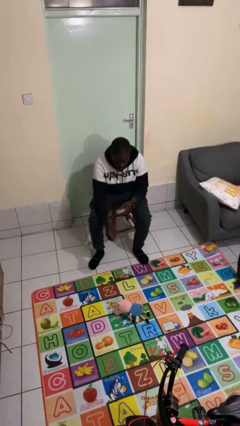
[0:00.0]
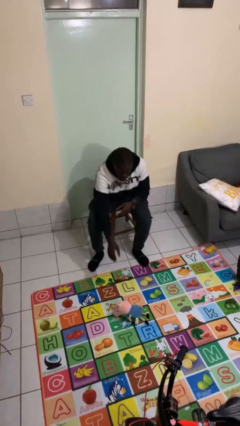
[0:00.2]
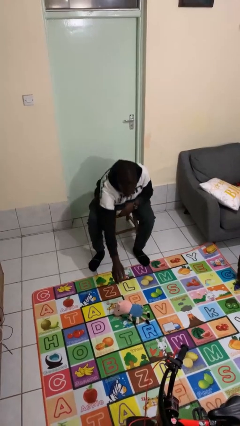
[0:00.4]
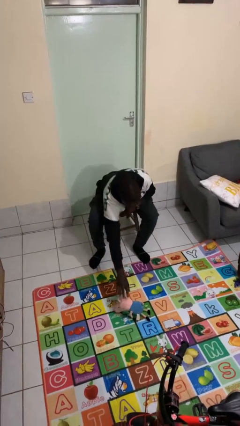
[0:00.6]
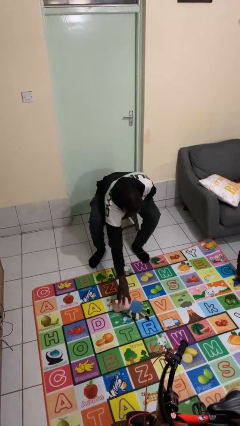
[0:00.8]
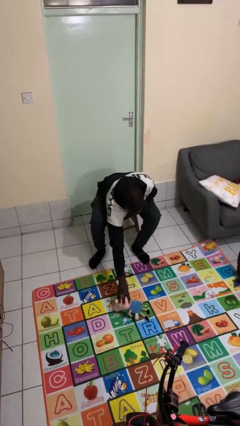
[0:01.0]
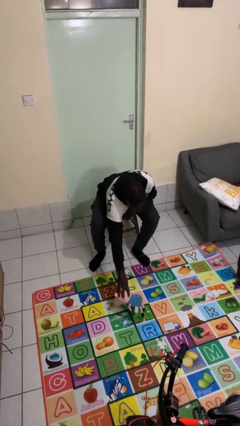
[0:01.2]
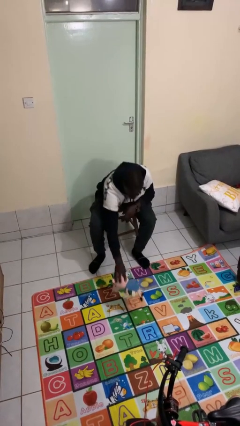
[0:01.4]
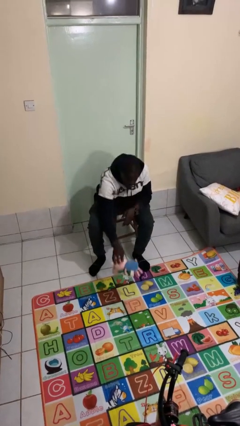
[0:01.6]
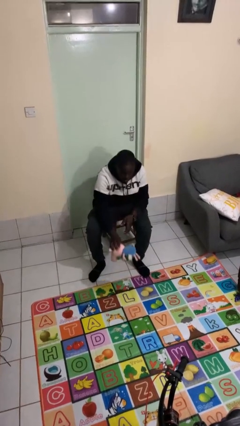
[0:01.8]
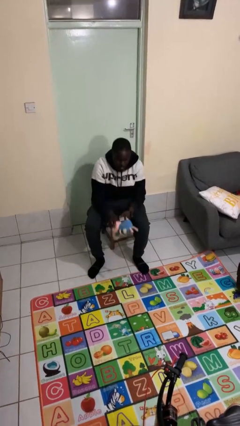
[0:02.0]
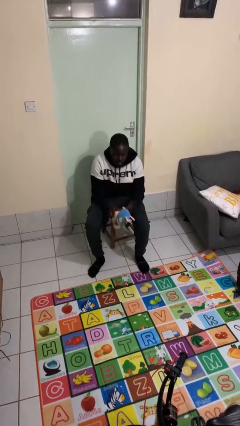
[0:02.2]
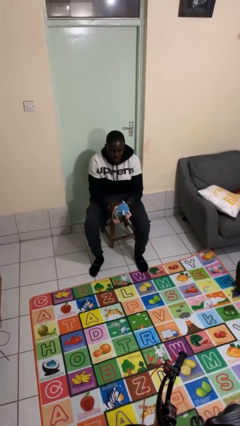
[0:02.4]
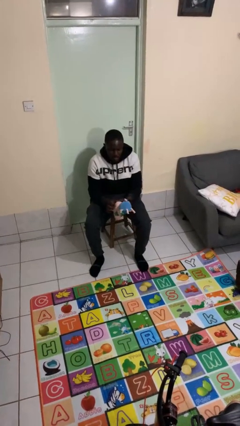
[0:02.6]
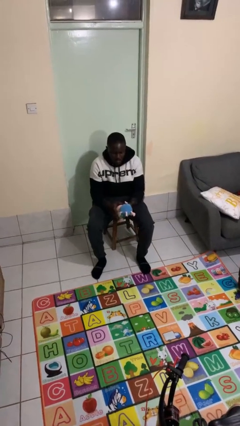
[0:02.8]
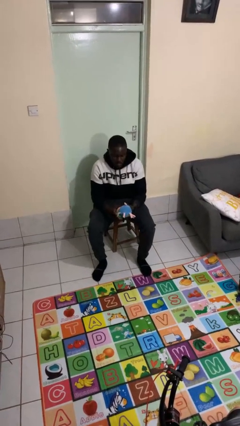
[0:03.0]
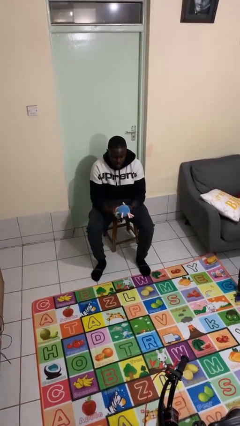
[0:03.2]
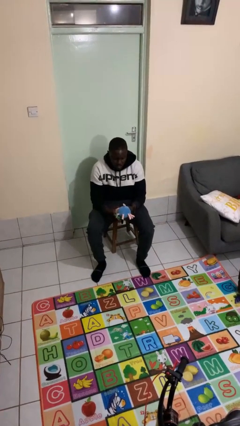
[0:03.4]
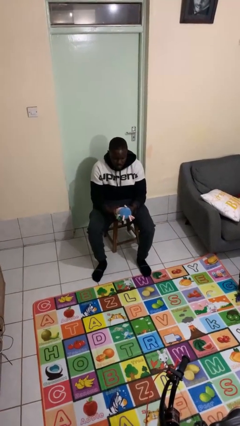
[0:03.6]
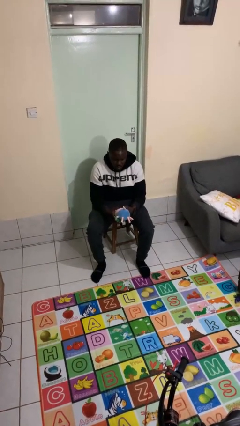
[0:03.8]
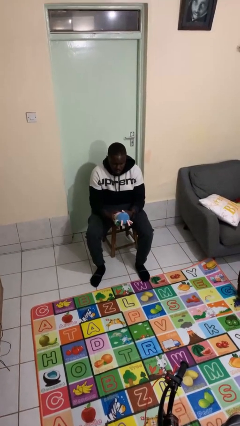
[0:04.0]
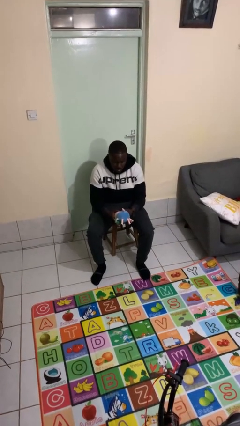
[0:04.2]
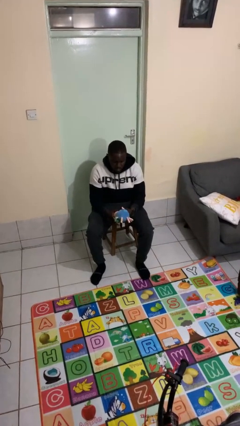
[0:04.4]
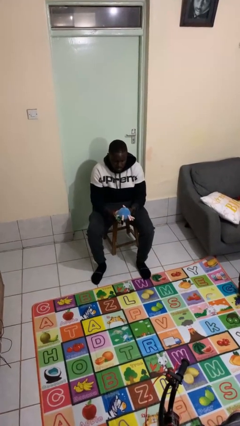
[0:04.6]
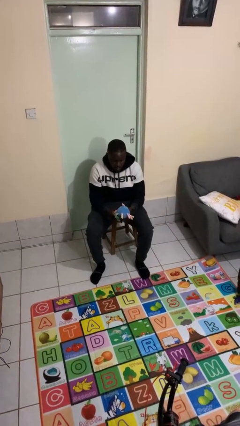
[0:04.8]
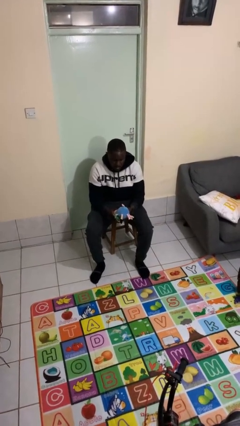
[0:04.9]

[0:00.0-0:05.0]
person picks up object from floor

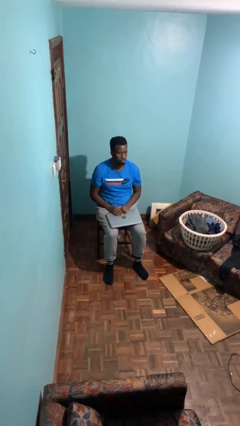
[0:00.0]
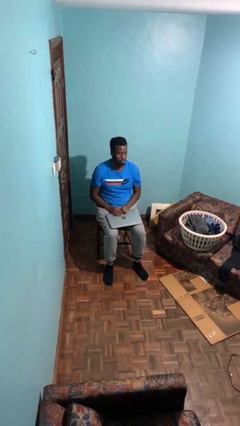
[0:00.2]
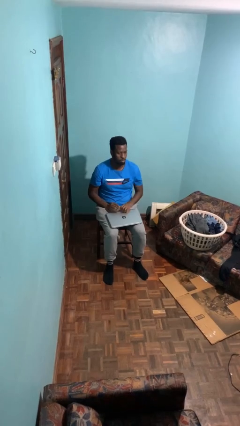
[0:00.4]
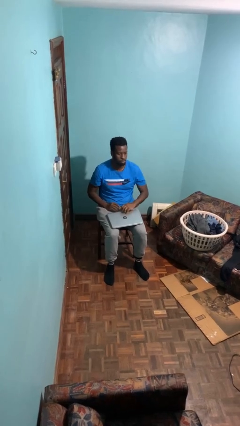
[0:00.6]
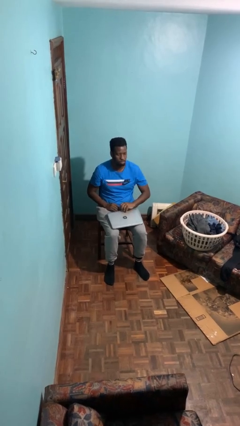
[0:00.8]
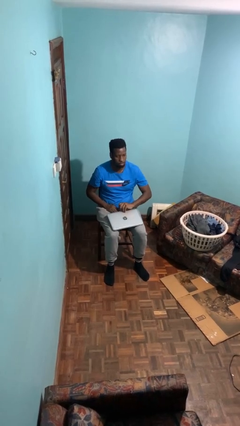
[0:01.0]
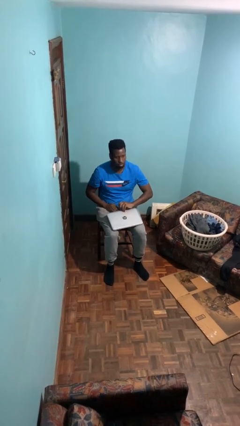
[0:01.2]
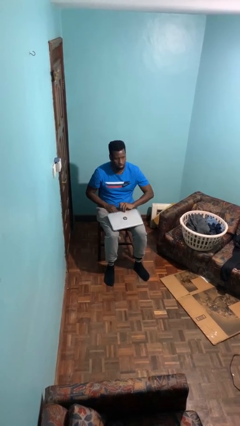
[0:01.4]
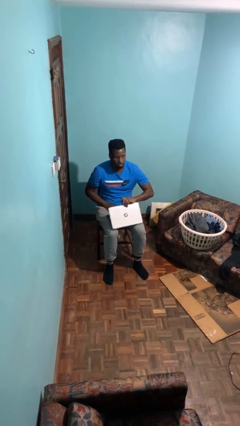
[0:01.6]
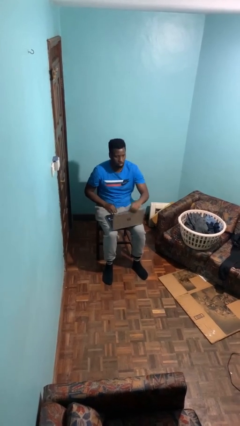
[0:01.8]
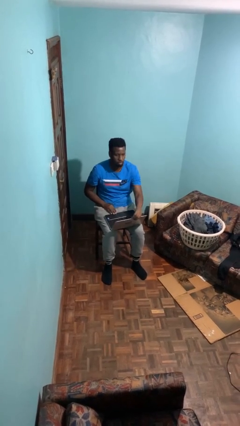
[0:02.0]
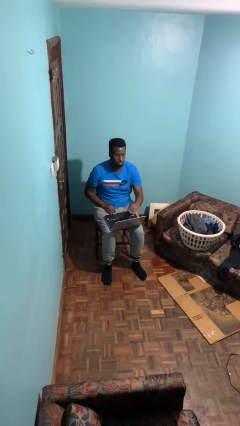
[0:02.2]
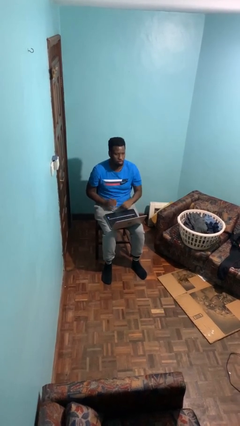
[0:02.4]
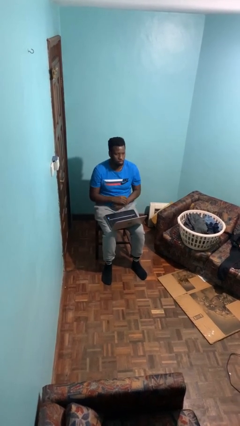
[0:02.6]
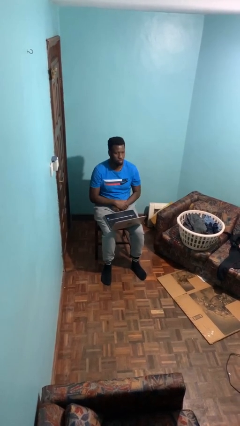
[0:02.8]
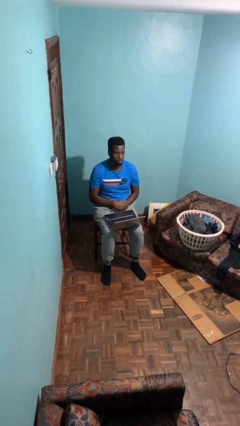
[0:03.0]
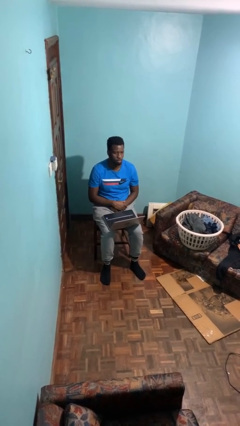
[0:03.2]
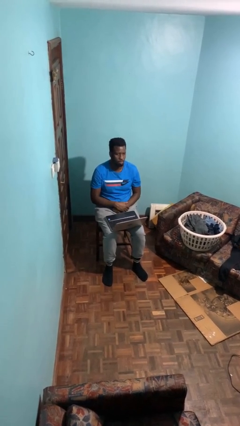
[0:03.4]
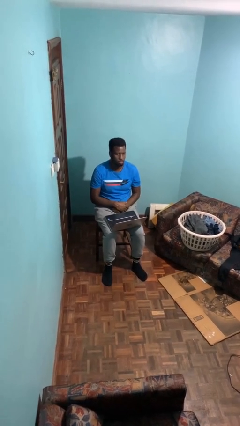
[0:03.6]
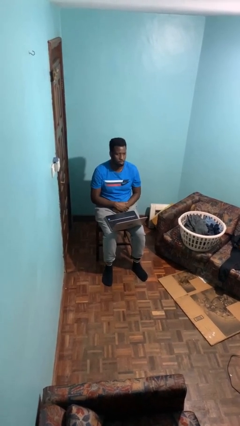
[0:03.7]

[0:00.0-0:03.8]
person opens laptop

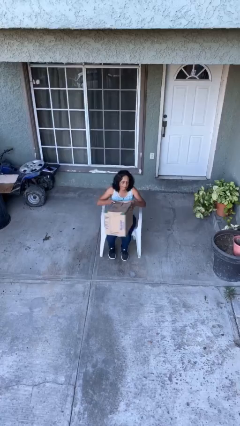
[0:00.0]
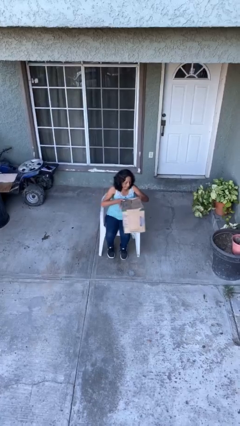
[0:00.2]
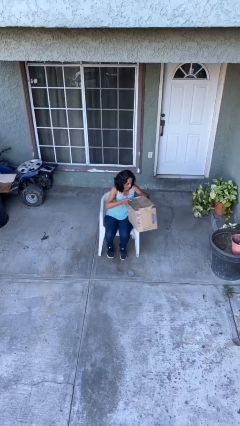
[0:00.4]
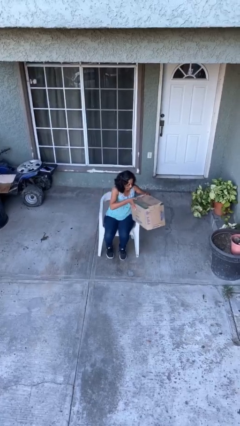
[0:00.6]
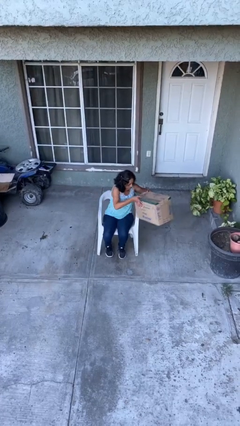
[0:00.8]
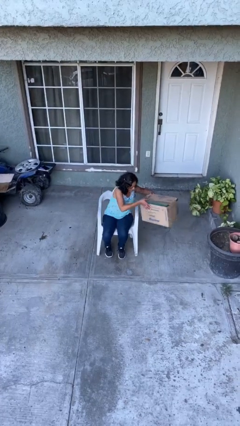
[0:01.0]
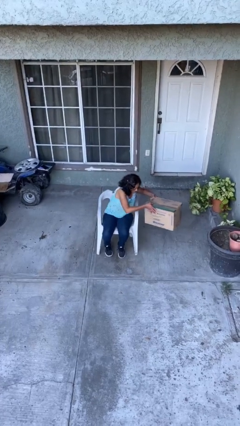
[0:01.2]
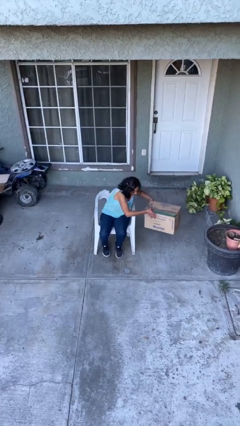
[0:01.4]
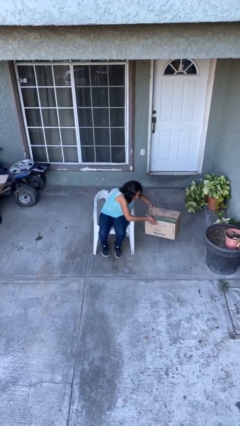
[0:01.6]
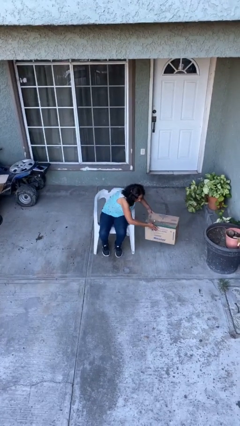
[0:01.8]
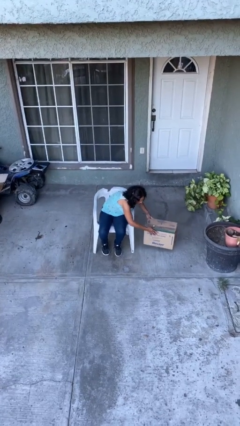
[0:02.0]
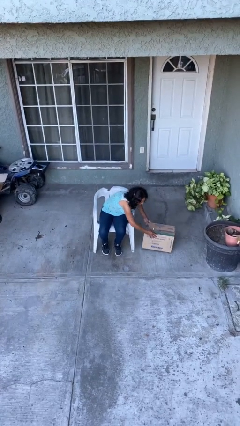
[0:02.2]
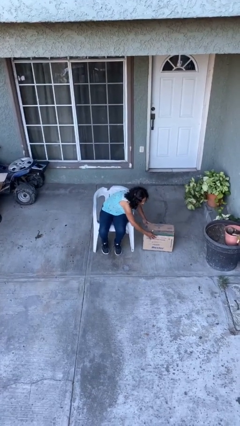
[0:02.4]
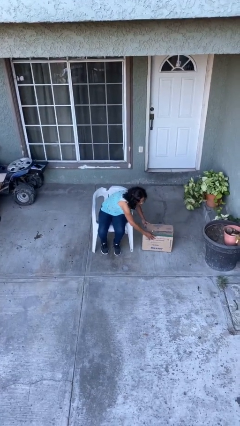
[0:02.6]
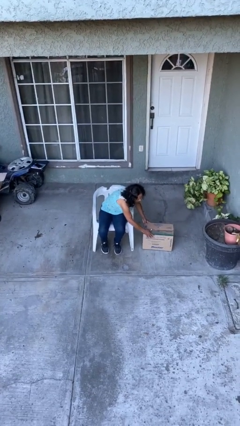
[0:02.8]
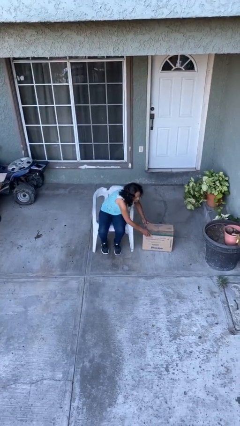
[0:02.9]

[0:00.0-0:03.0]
person puts down object on floor

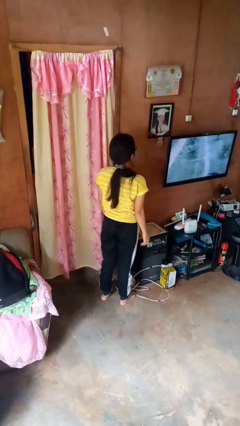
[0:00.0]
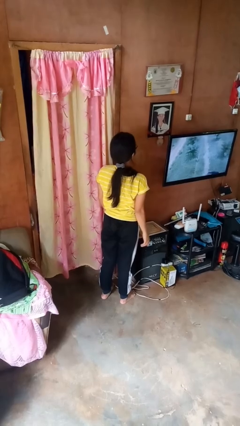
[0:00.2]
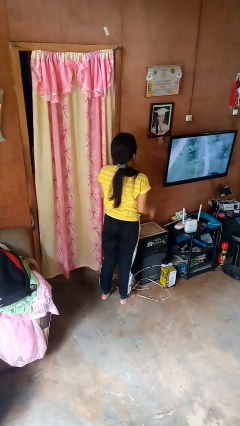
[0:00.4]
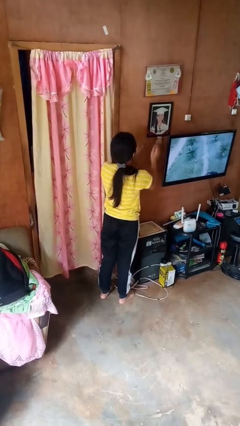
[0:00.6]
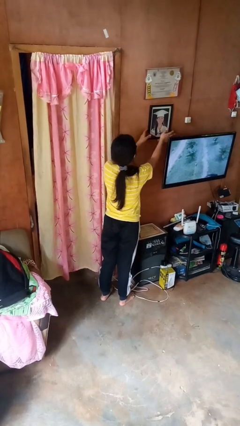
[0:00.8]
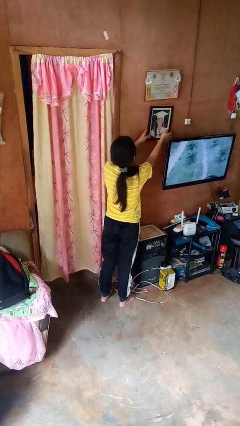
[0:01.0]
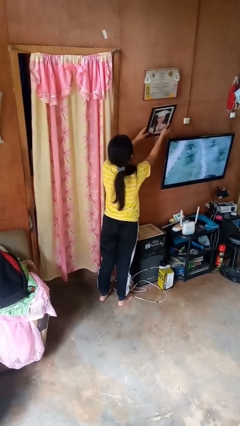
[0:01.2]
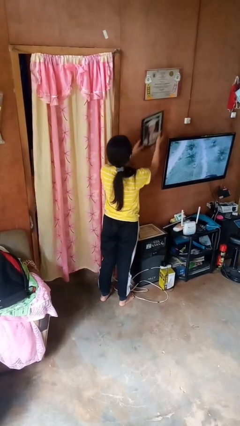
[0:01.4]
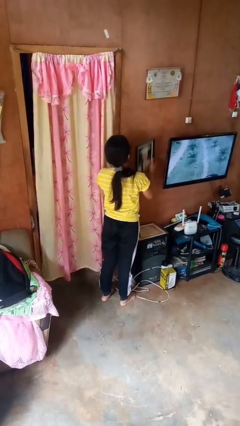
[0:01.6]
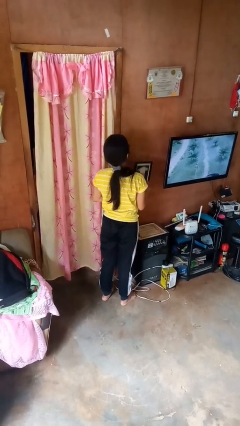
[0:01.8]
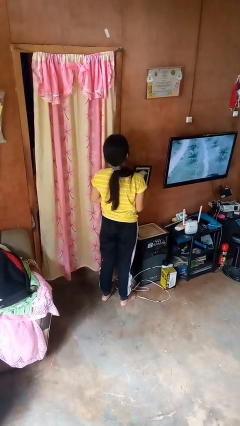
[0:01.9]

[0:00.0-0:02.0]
person takes down picture frame

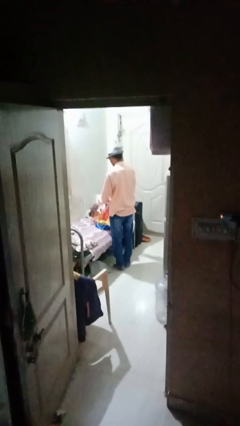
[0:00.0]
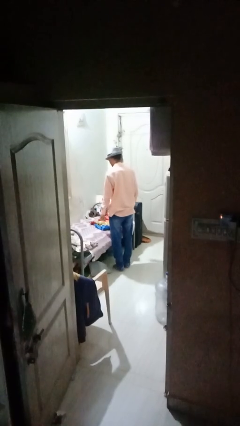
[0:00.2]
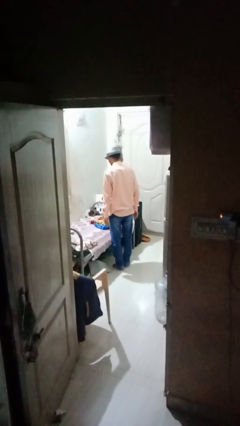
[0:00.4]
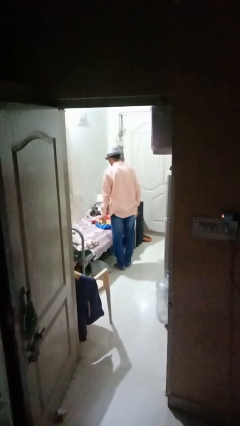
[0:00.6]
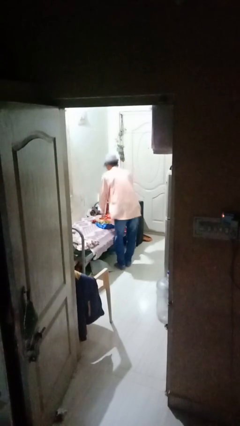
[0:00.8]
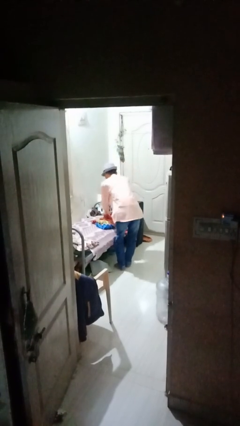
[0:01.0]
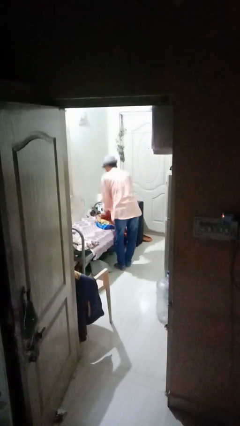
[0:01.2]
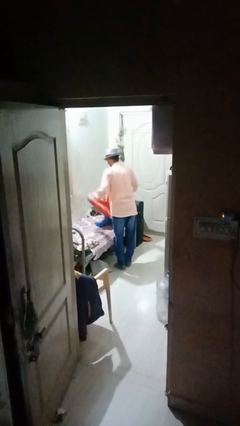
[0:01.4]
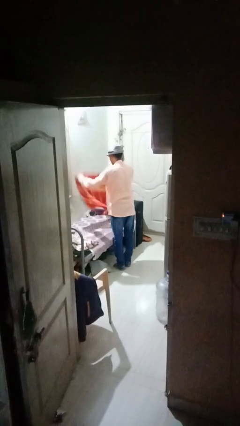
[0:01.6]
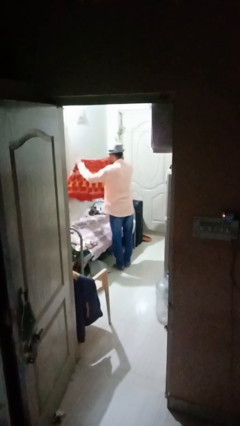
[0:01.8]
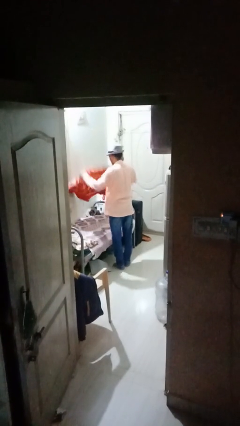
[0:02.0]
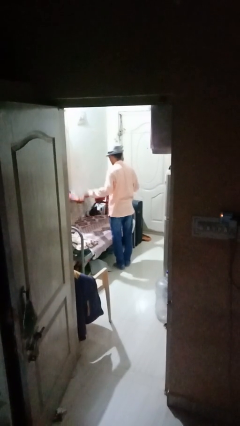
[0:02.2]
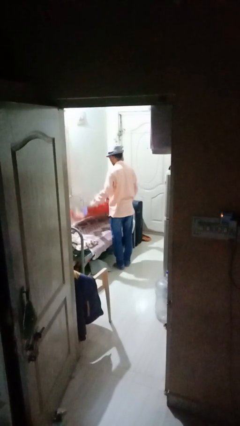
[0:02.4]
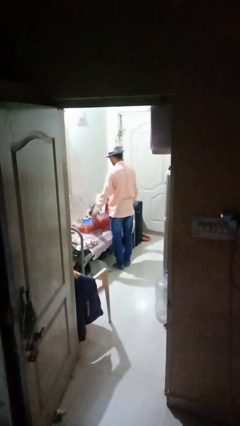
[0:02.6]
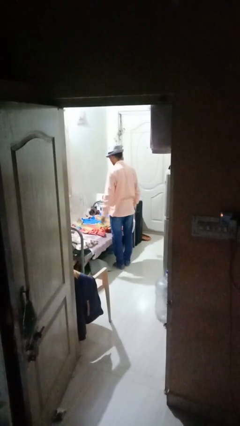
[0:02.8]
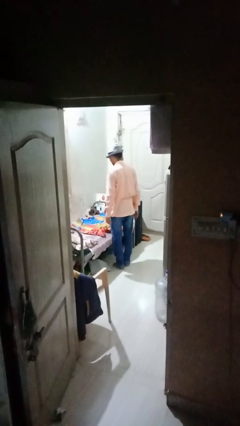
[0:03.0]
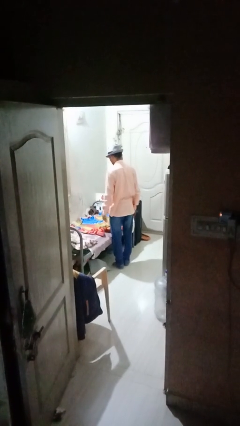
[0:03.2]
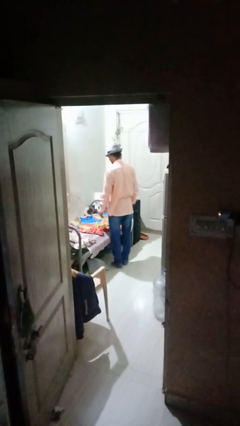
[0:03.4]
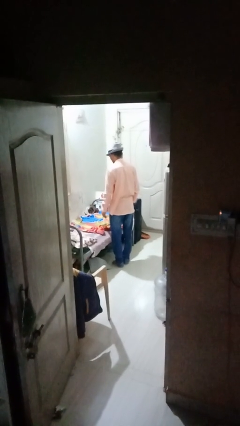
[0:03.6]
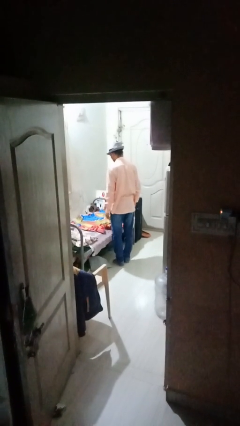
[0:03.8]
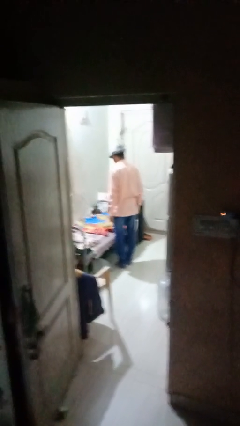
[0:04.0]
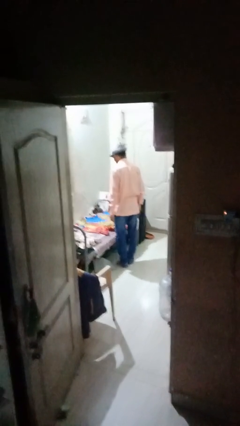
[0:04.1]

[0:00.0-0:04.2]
person unfolds blanket
